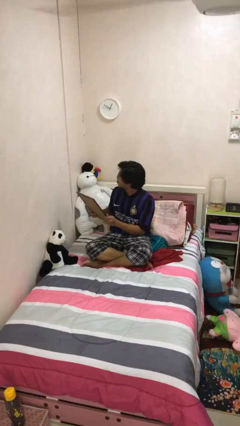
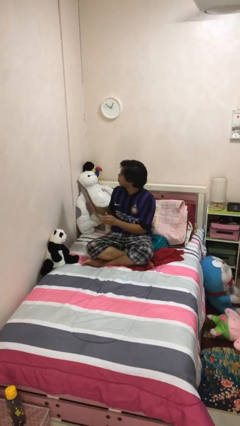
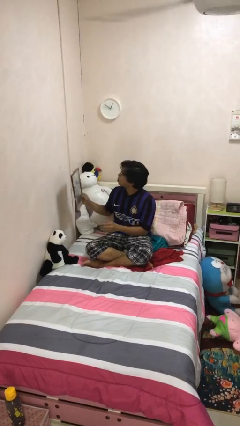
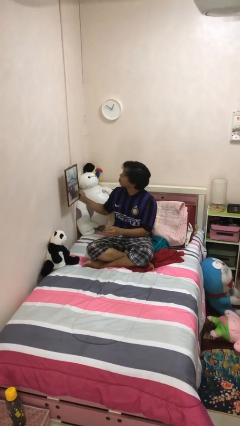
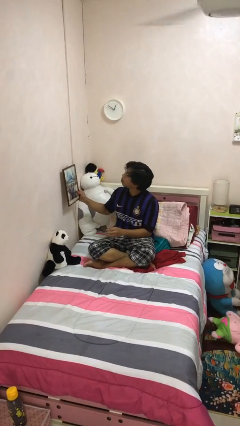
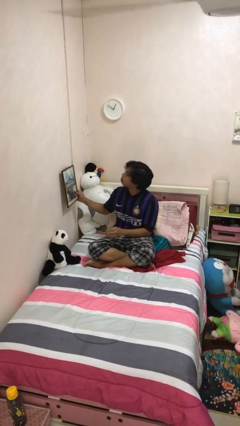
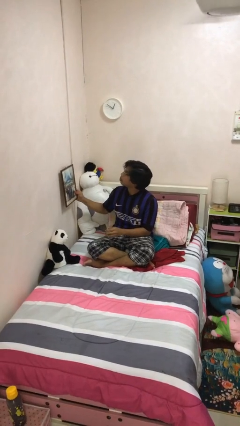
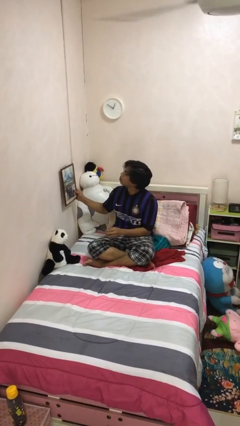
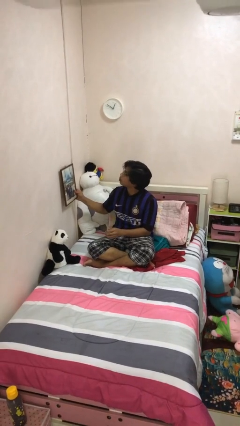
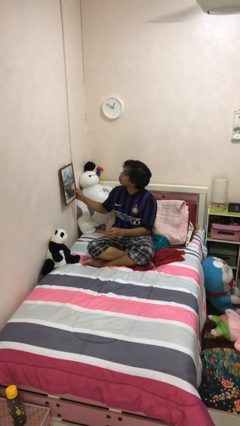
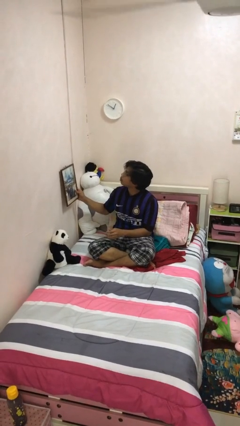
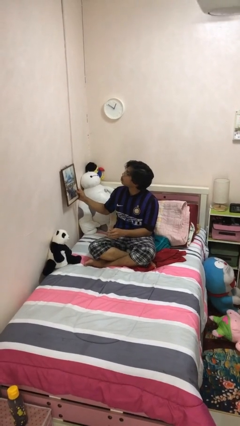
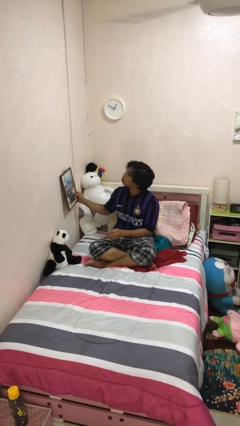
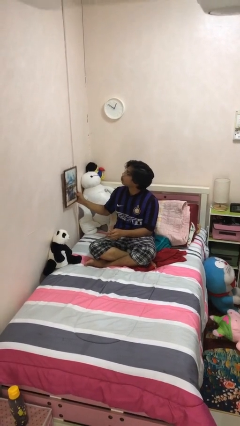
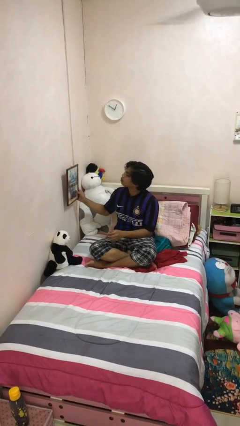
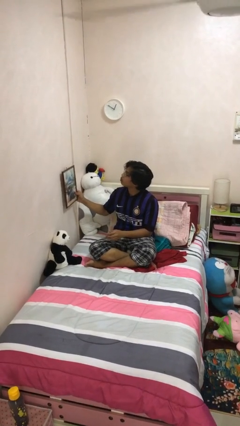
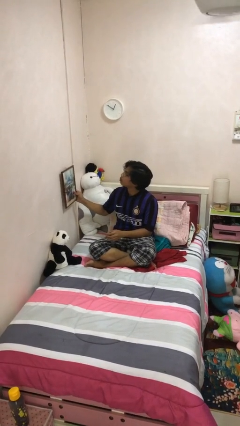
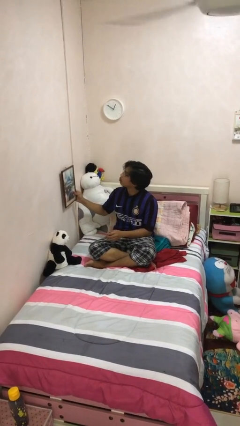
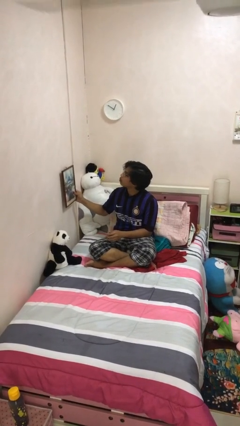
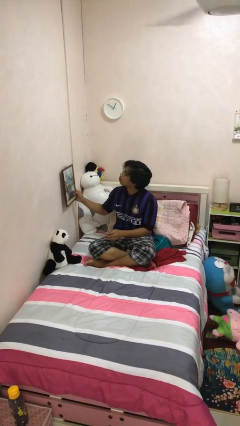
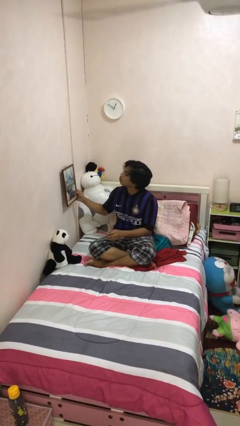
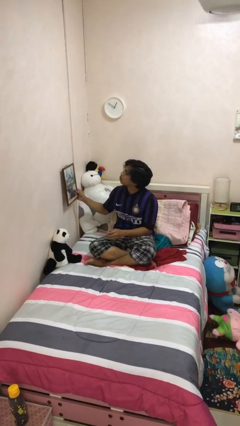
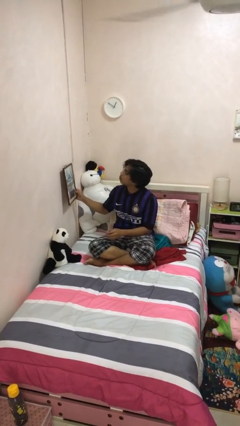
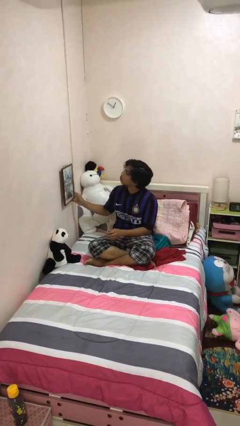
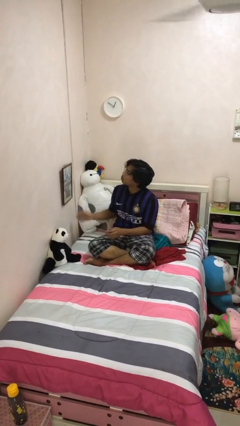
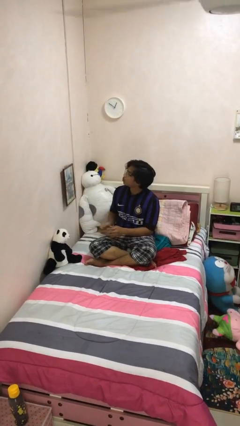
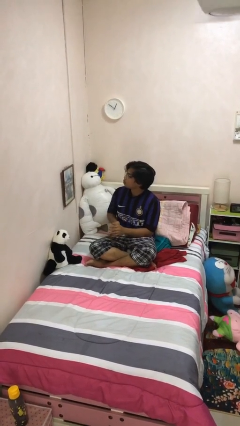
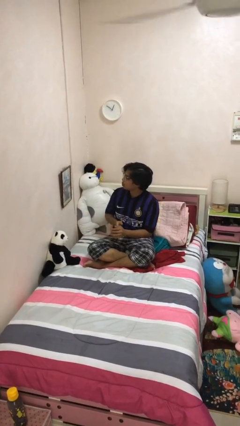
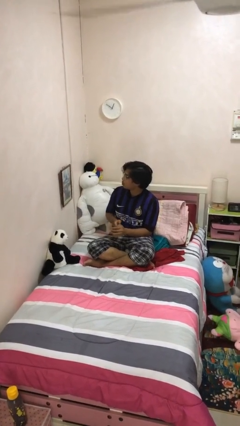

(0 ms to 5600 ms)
person puts up picture frame

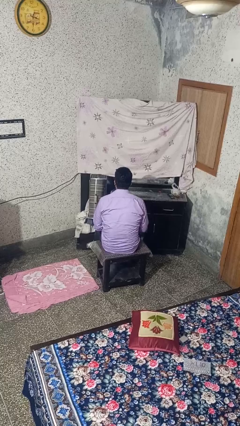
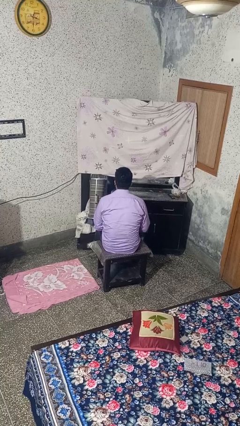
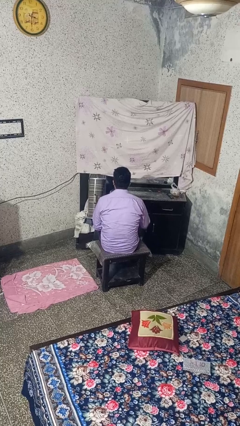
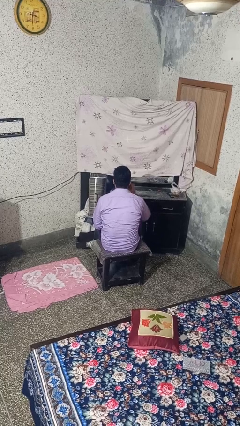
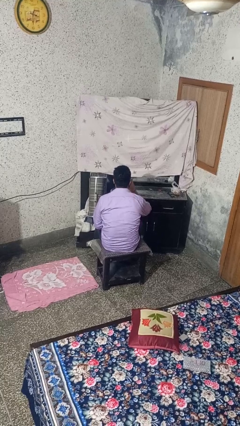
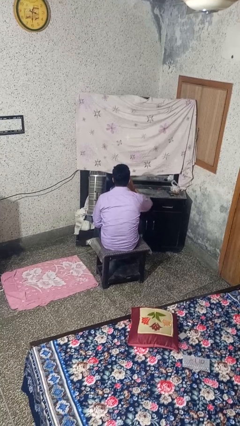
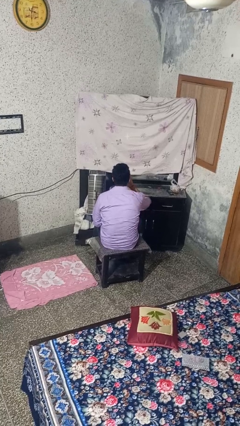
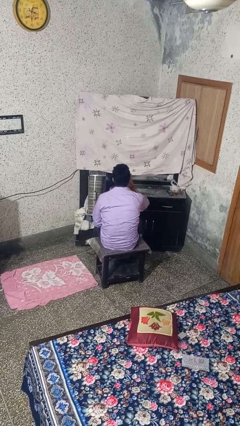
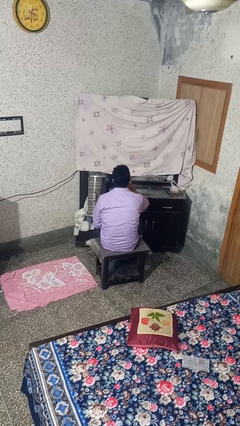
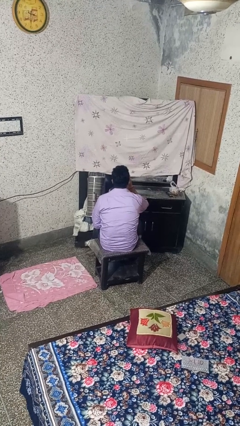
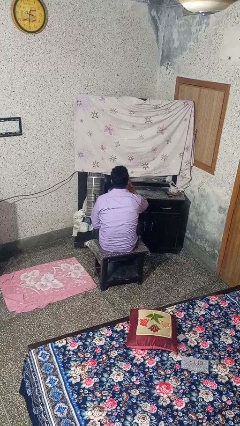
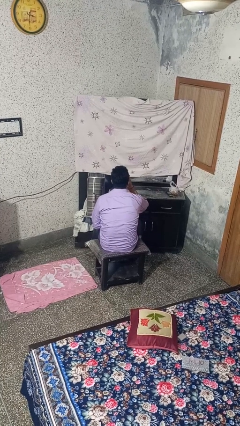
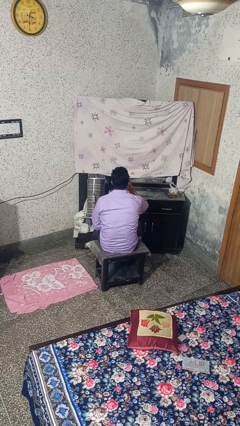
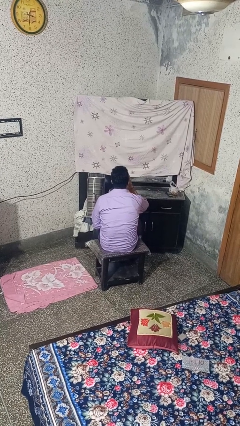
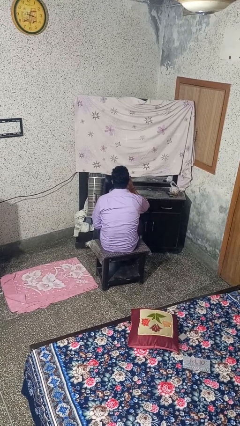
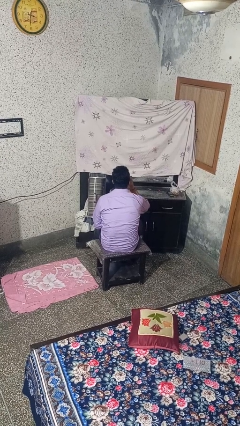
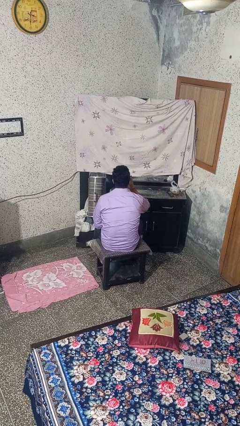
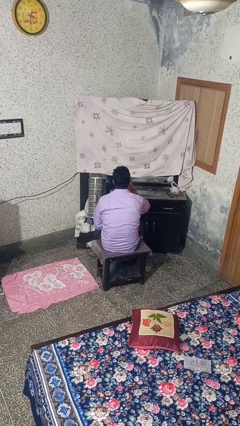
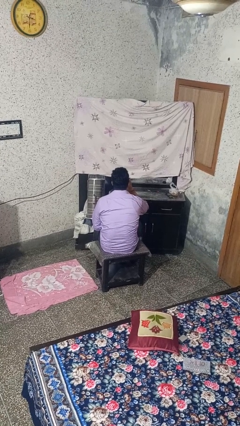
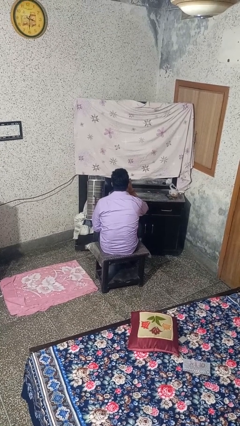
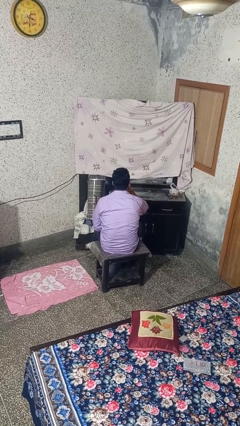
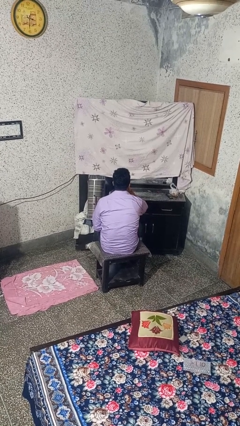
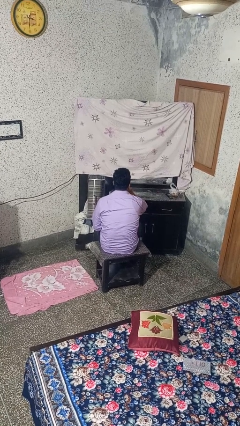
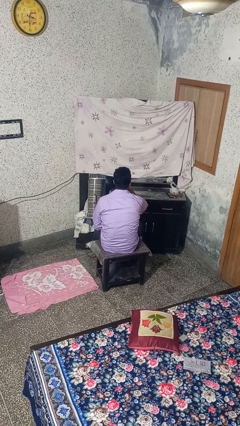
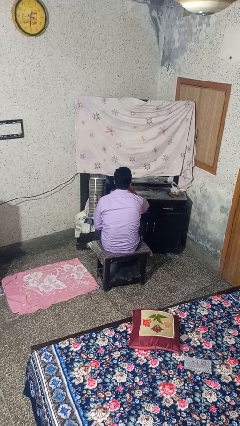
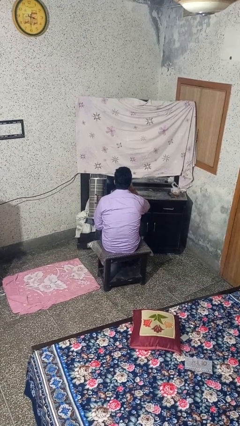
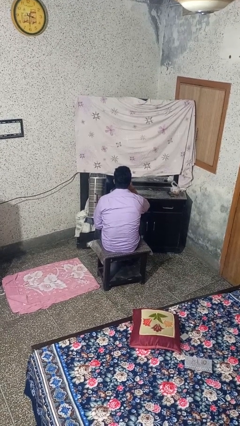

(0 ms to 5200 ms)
person applies lip makeup

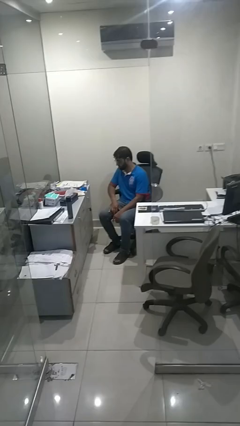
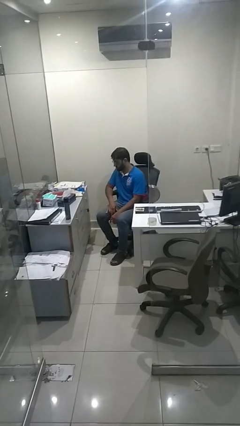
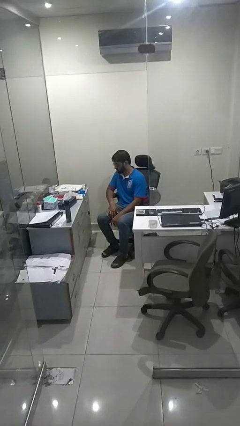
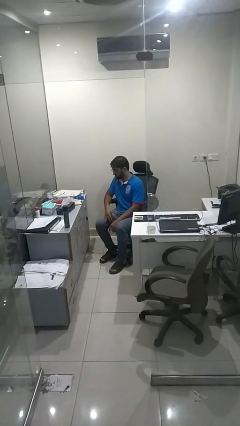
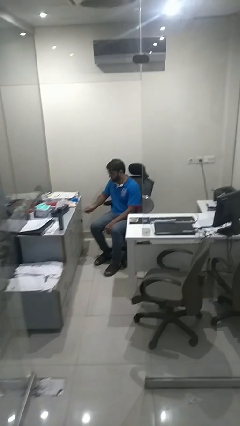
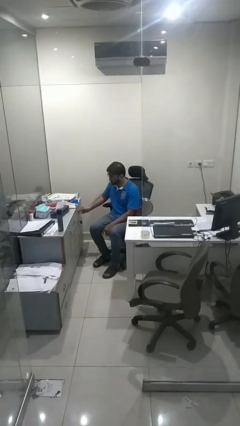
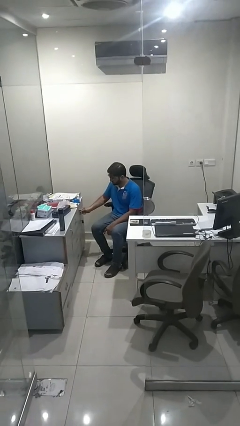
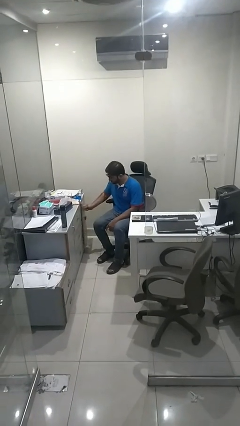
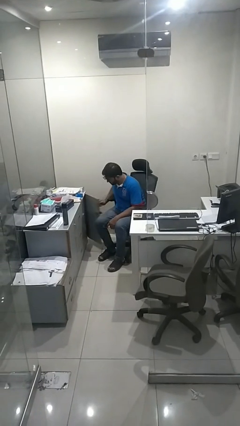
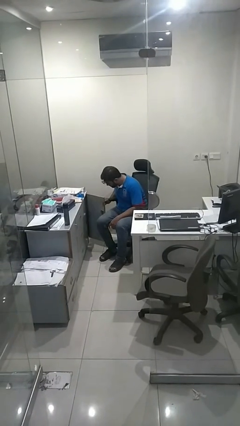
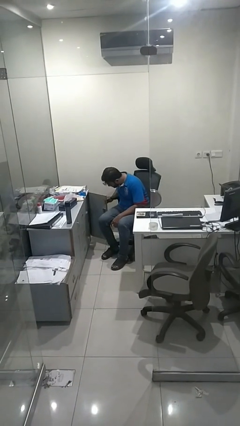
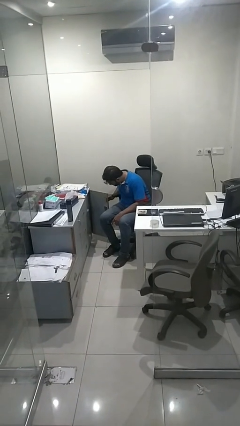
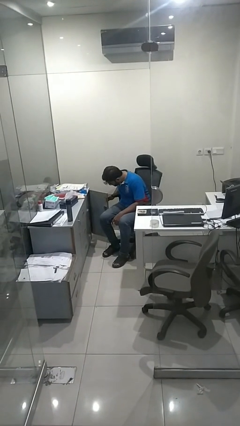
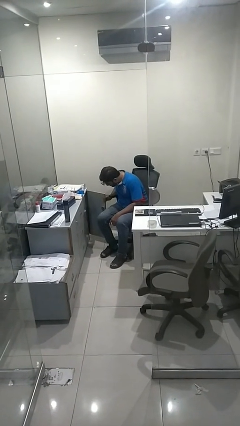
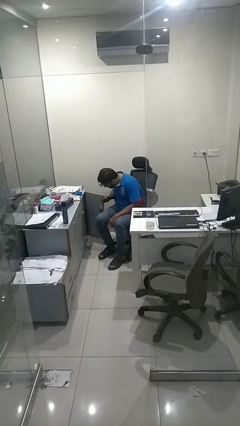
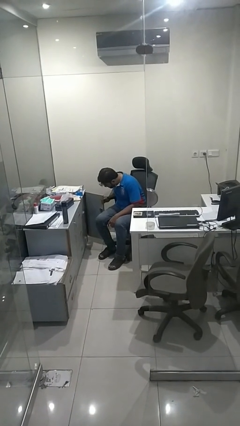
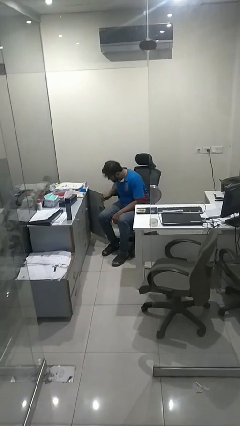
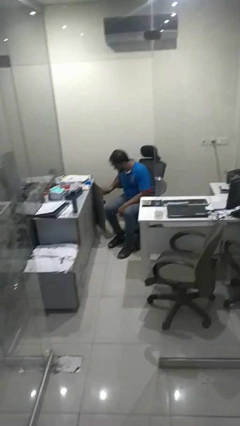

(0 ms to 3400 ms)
person searches in cabinet

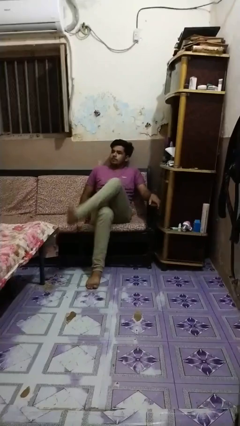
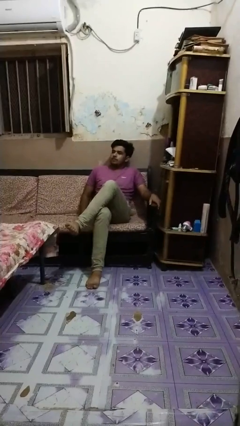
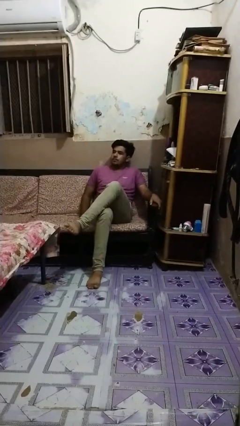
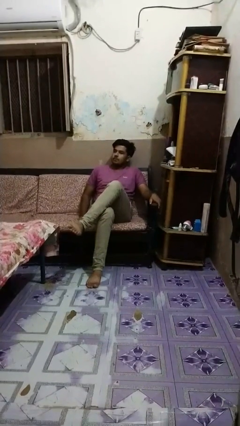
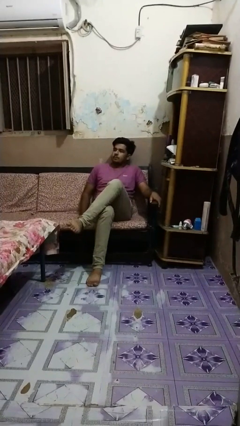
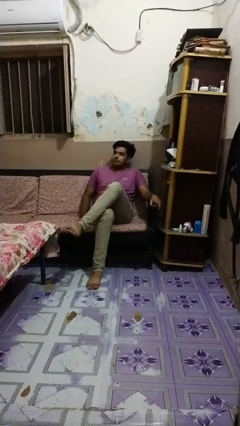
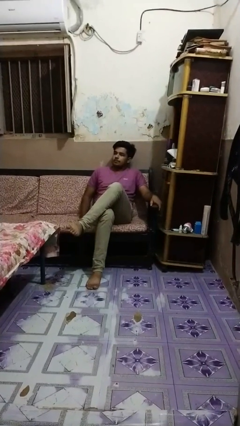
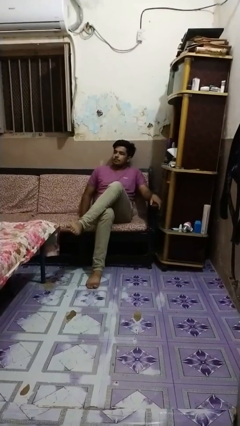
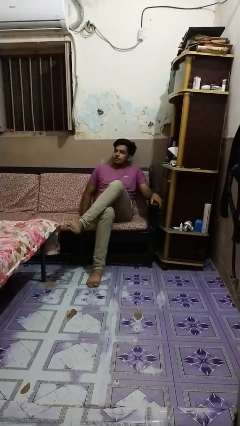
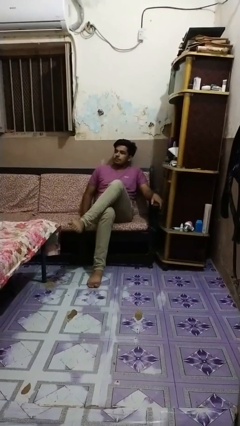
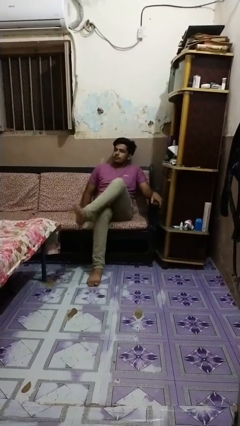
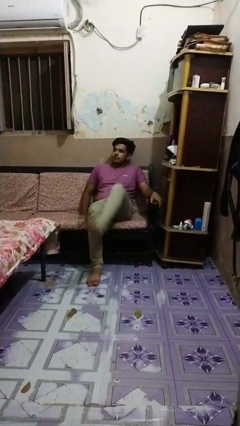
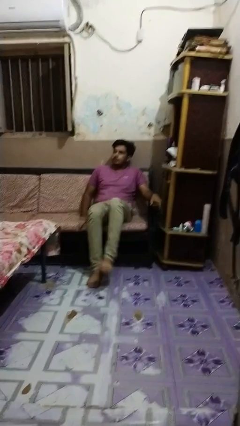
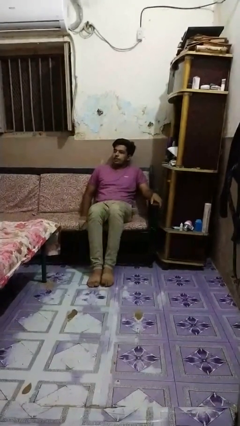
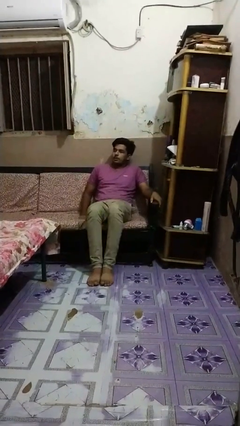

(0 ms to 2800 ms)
person crosses legs

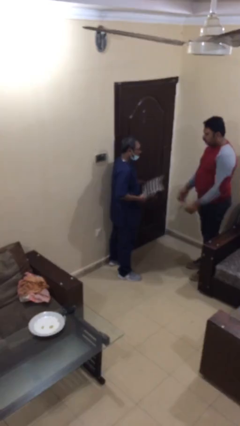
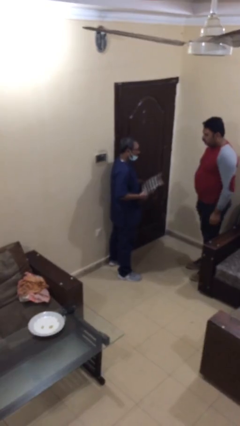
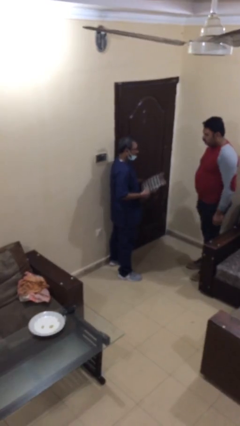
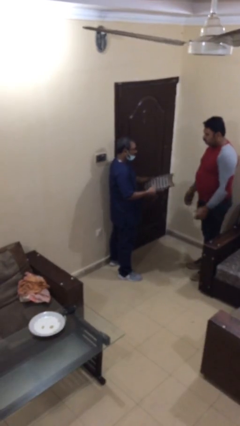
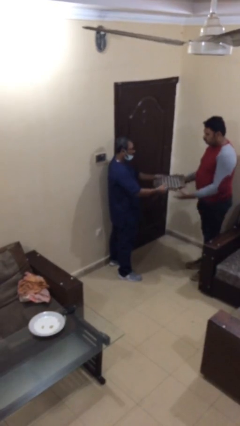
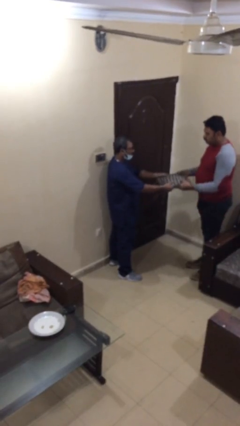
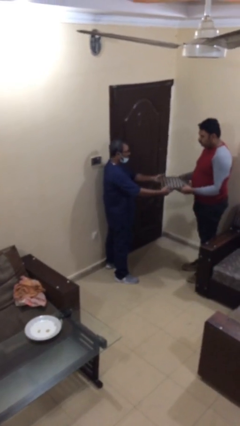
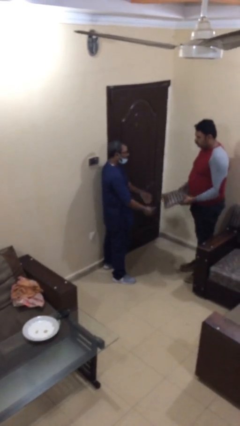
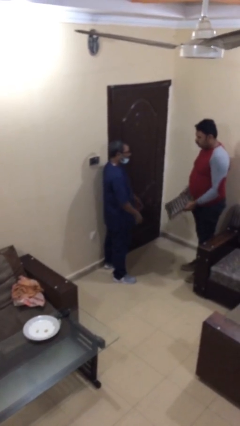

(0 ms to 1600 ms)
person transfers object to person
